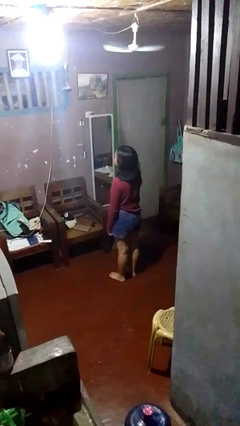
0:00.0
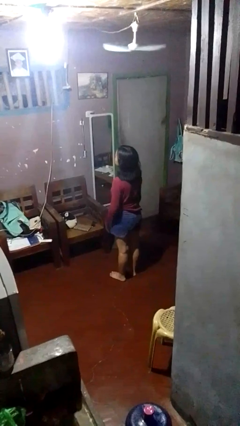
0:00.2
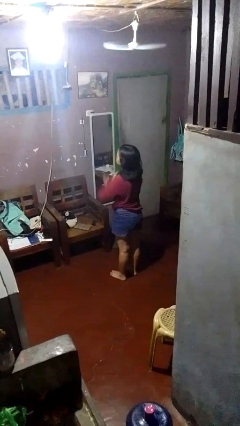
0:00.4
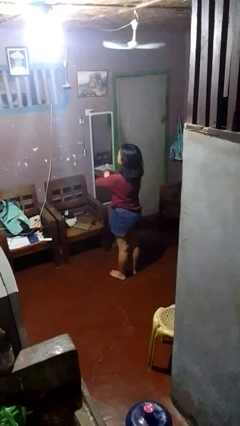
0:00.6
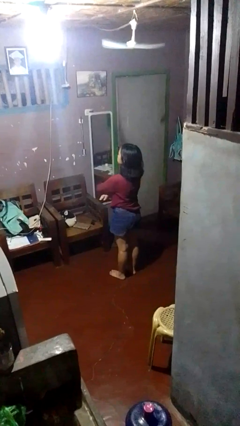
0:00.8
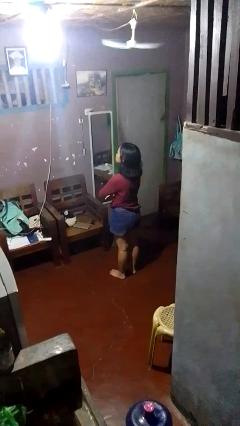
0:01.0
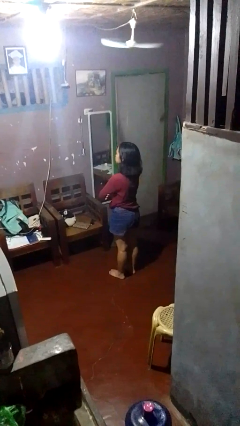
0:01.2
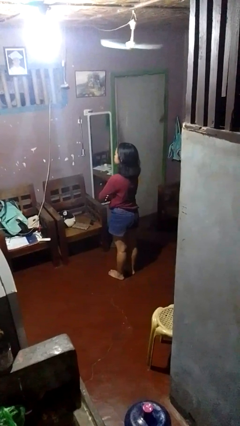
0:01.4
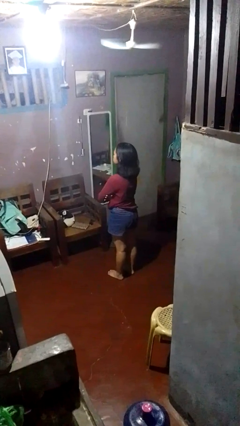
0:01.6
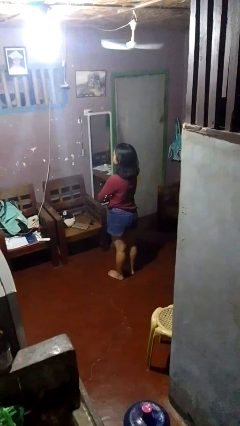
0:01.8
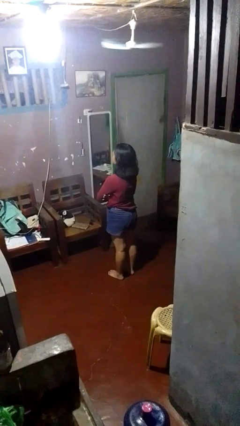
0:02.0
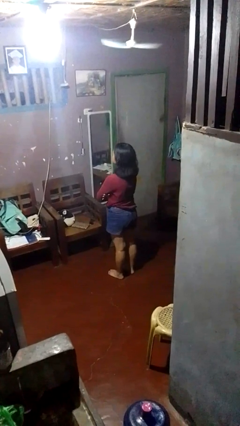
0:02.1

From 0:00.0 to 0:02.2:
person crosses arms

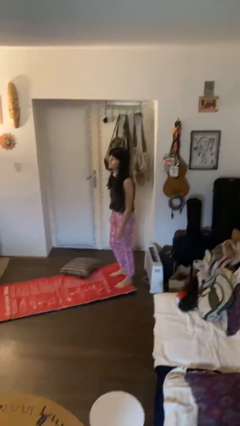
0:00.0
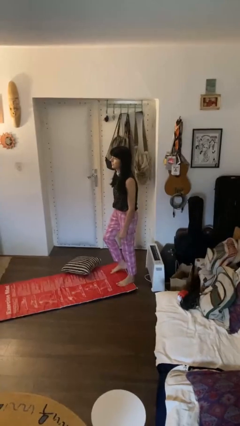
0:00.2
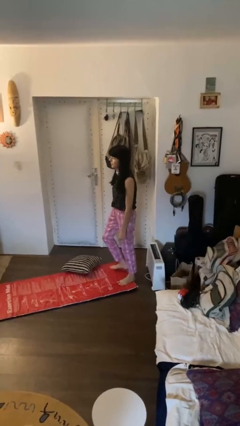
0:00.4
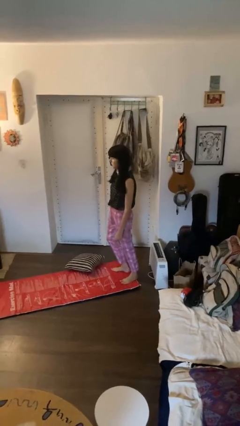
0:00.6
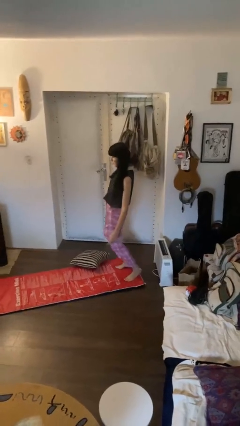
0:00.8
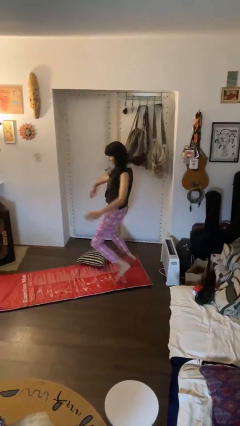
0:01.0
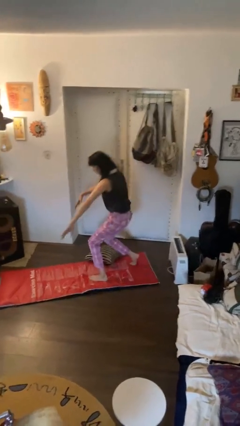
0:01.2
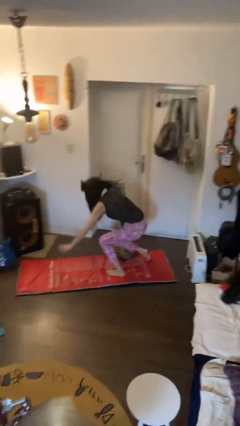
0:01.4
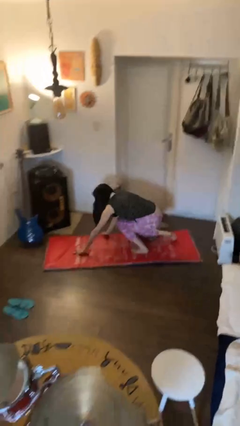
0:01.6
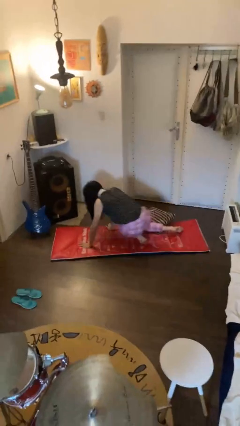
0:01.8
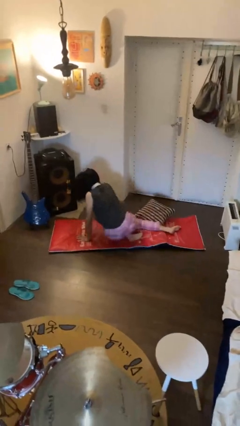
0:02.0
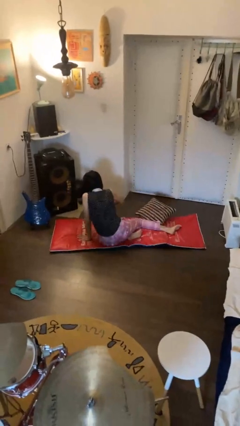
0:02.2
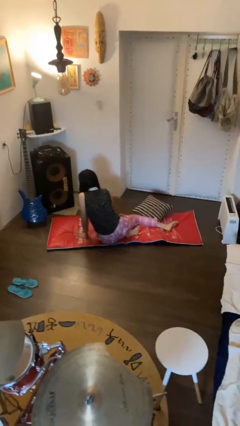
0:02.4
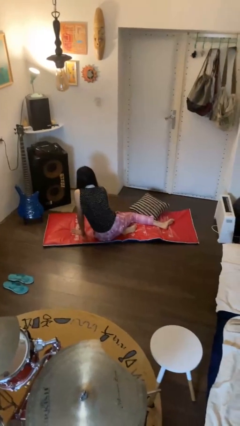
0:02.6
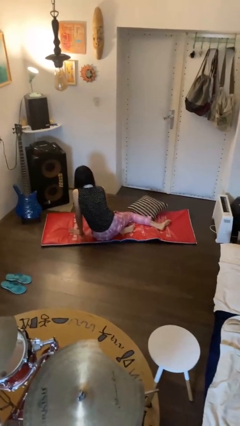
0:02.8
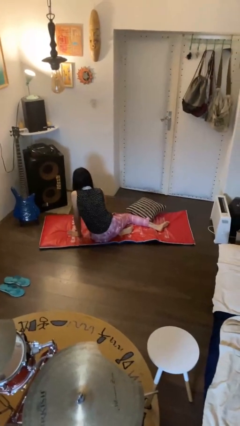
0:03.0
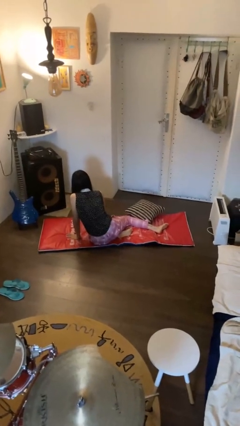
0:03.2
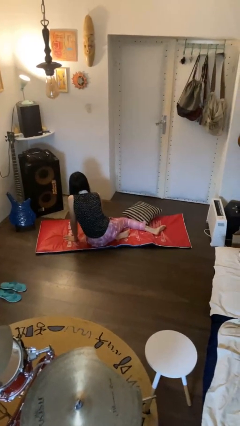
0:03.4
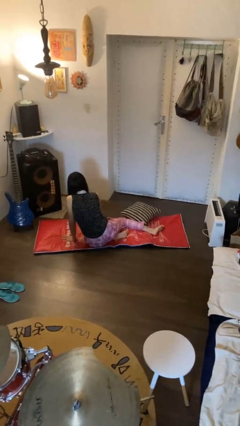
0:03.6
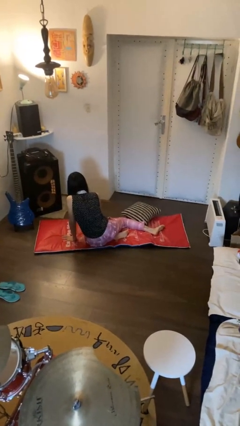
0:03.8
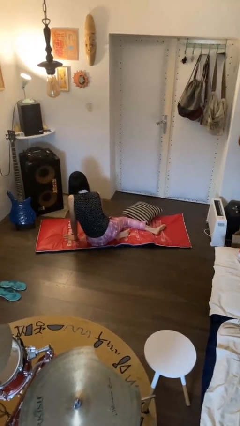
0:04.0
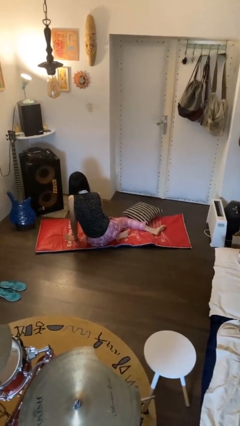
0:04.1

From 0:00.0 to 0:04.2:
person trips on object on floor

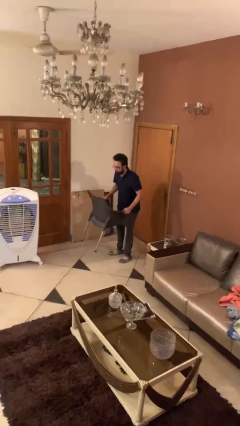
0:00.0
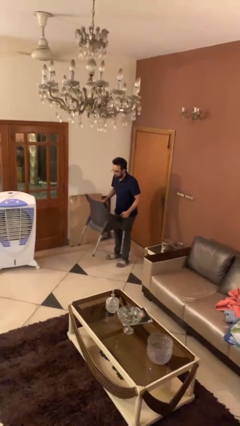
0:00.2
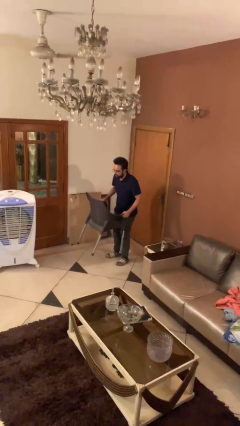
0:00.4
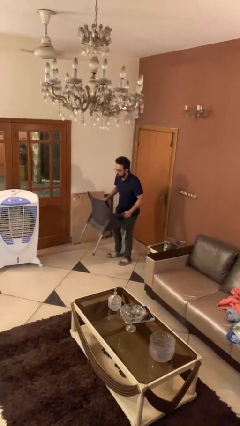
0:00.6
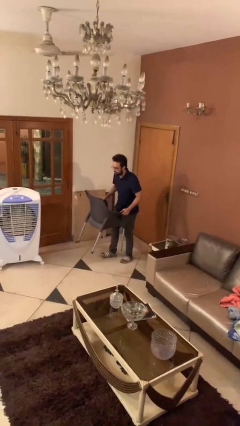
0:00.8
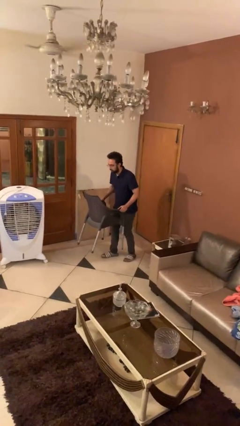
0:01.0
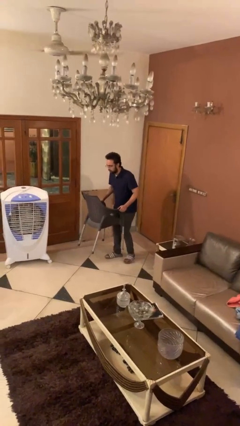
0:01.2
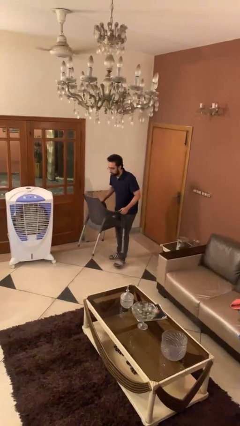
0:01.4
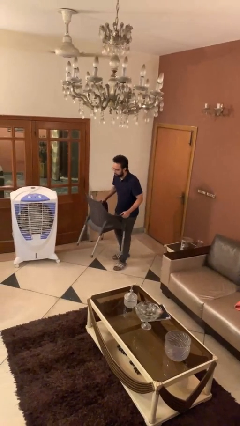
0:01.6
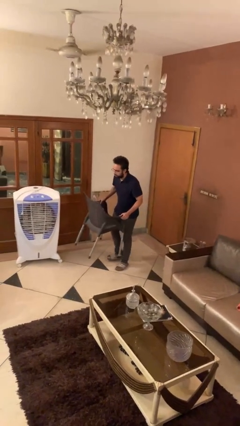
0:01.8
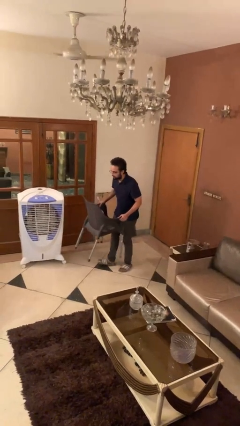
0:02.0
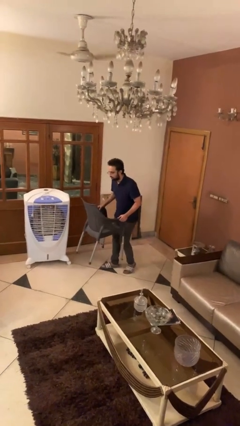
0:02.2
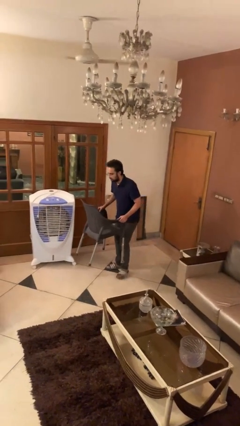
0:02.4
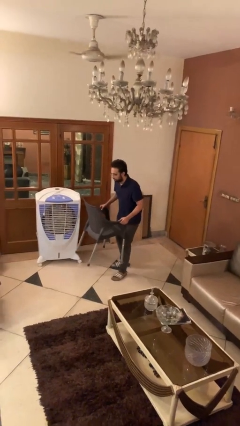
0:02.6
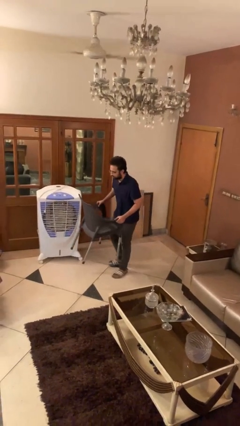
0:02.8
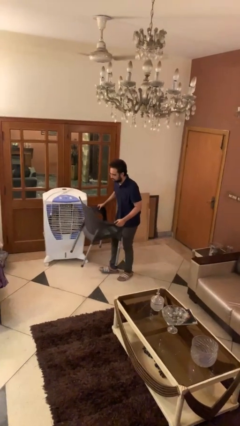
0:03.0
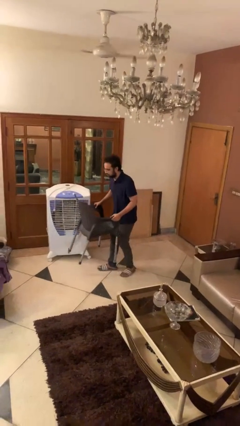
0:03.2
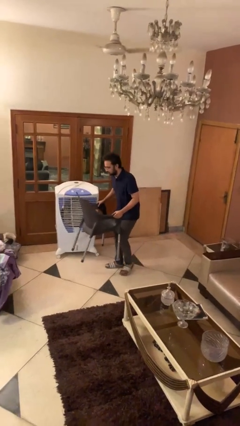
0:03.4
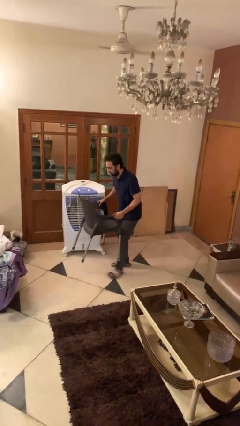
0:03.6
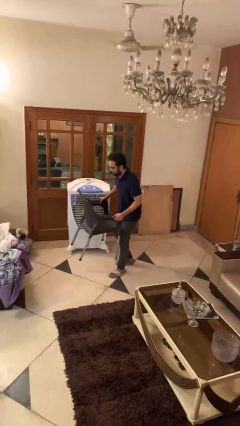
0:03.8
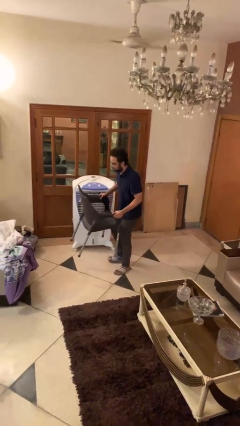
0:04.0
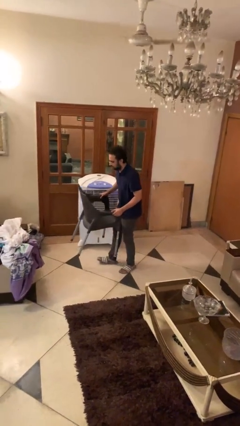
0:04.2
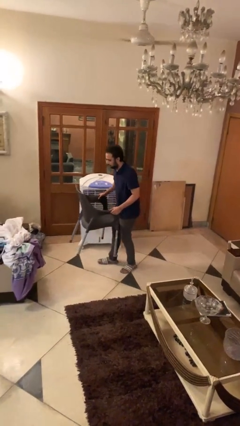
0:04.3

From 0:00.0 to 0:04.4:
person carries heavy object

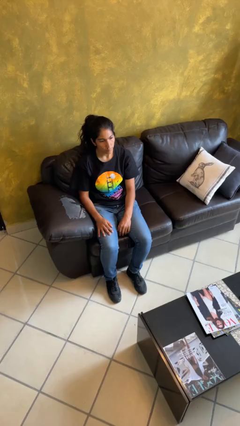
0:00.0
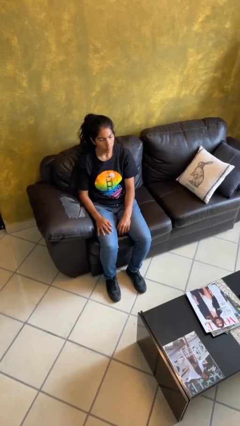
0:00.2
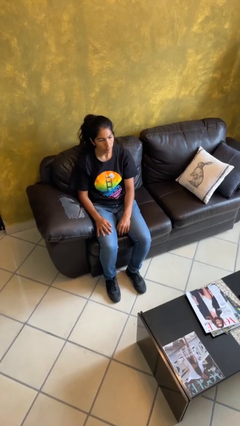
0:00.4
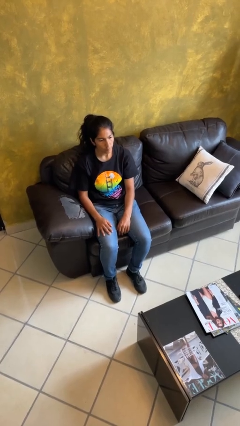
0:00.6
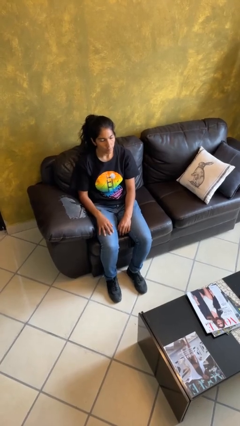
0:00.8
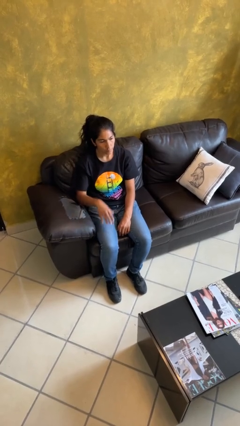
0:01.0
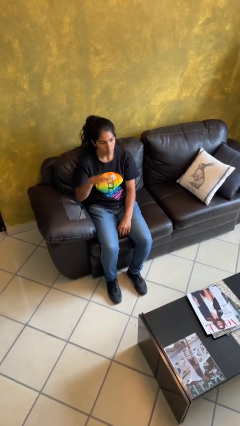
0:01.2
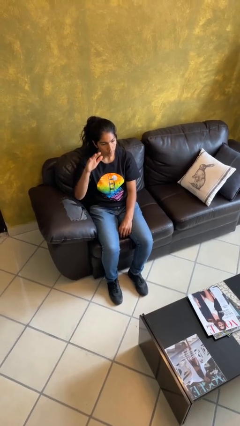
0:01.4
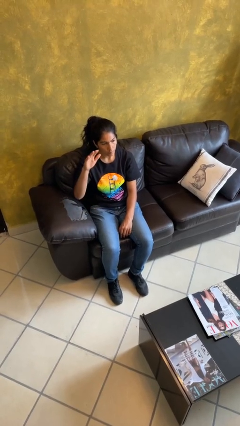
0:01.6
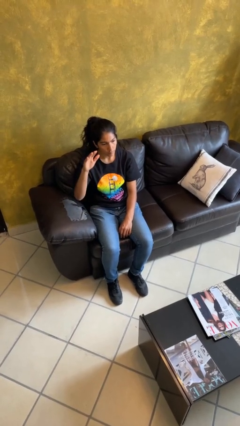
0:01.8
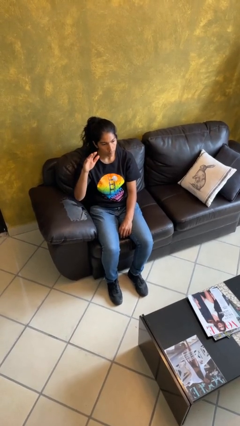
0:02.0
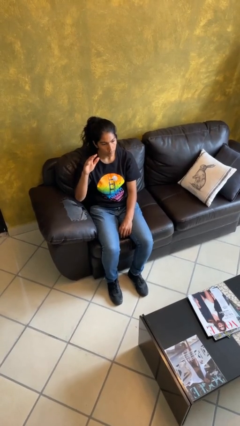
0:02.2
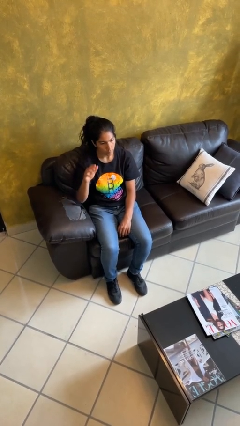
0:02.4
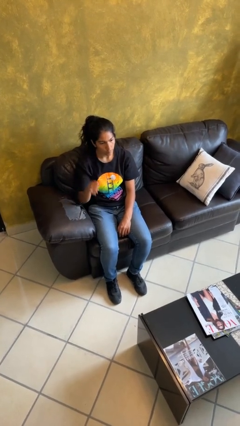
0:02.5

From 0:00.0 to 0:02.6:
person gestures swipe up

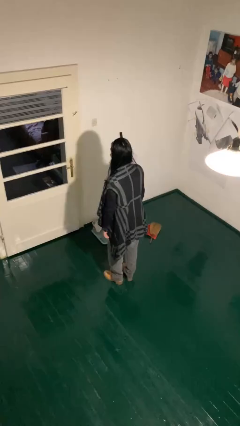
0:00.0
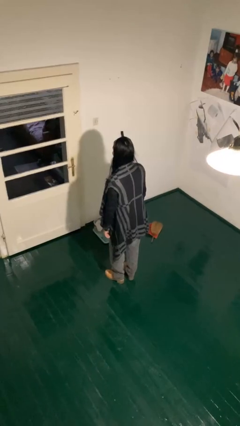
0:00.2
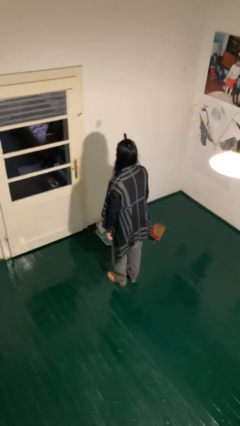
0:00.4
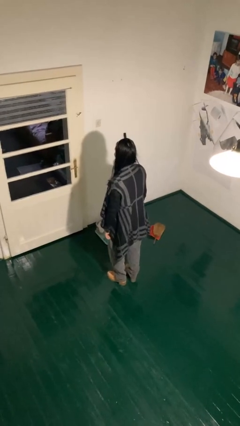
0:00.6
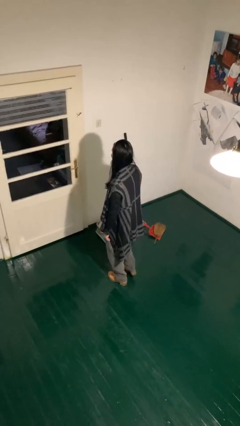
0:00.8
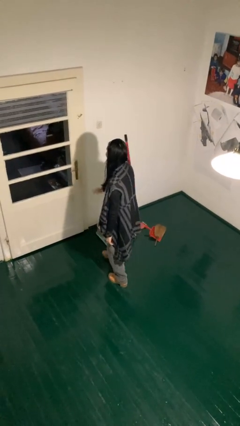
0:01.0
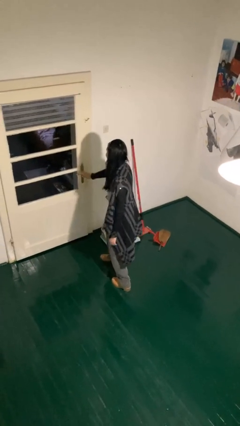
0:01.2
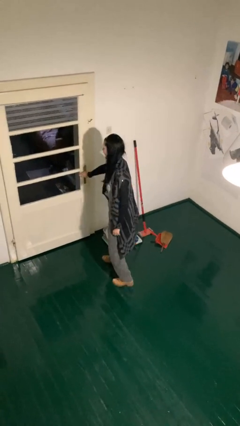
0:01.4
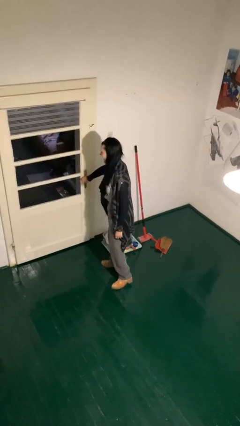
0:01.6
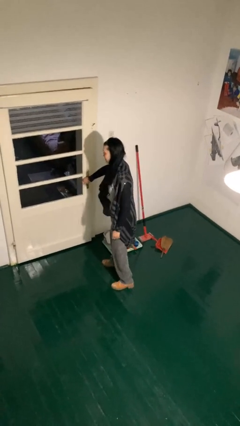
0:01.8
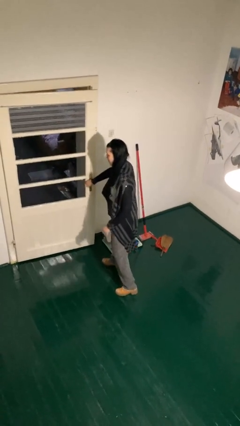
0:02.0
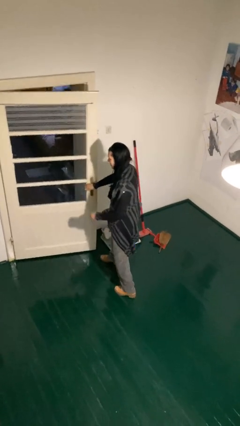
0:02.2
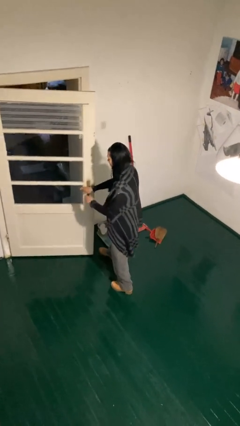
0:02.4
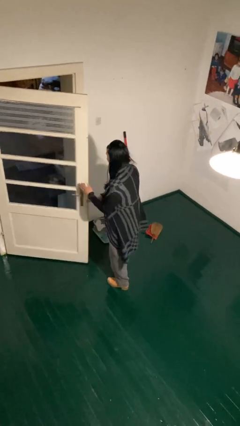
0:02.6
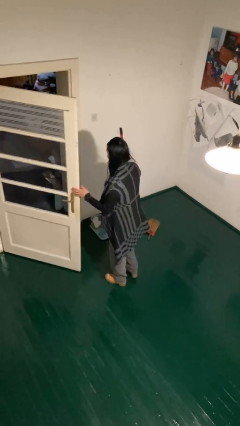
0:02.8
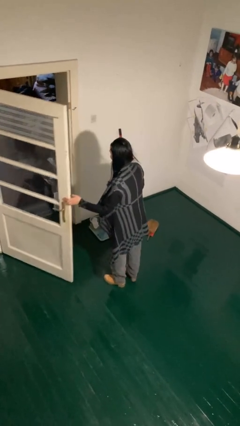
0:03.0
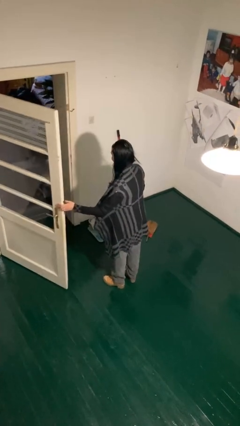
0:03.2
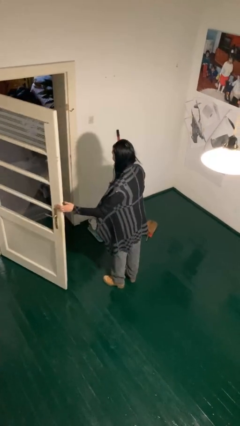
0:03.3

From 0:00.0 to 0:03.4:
person opens facility door

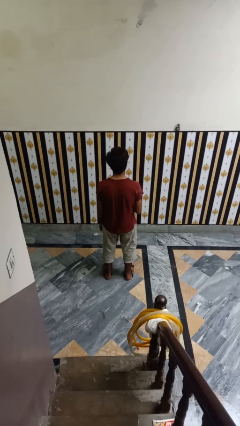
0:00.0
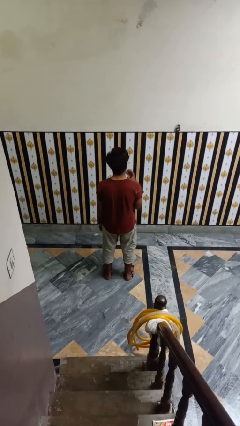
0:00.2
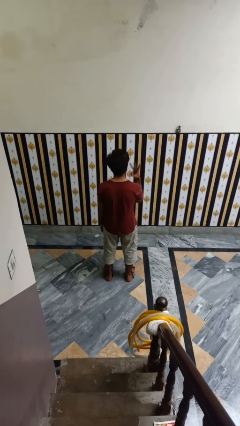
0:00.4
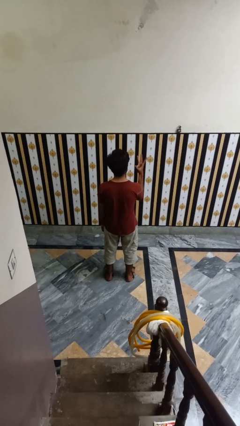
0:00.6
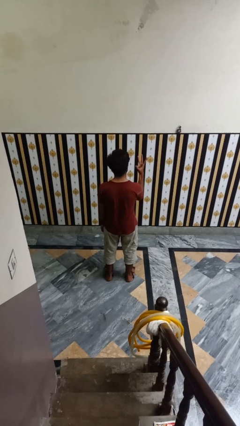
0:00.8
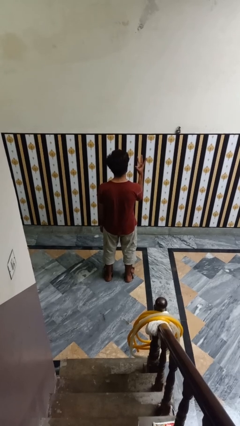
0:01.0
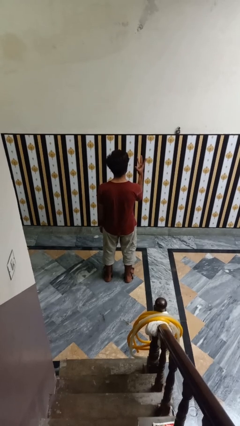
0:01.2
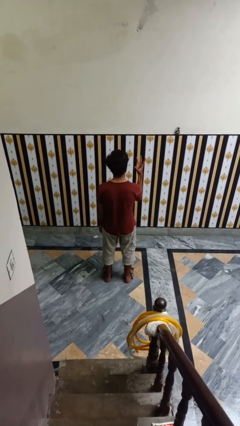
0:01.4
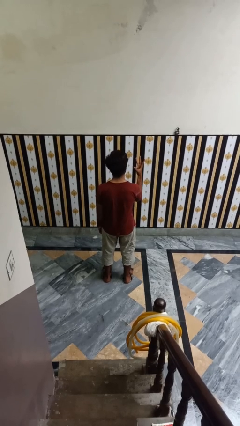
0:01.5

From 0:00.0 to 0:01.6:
person gestures number three
